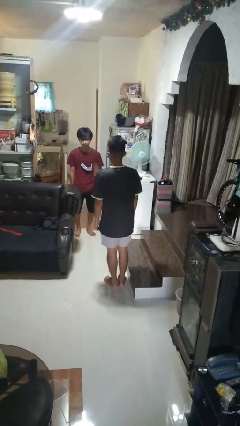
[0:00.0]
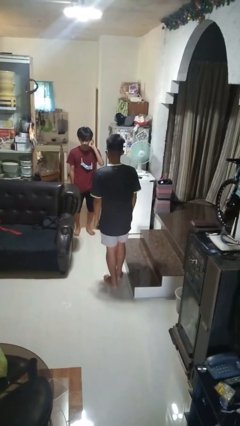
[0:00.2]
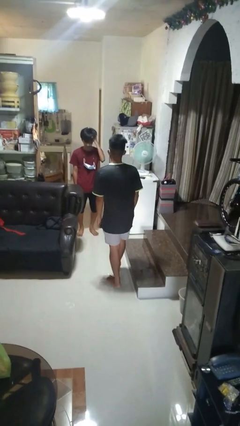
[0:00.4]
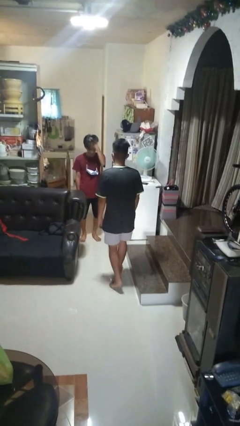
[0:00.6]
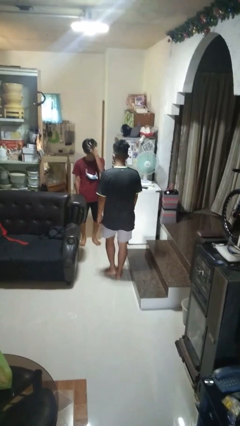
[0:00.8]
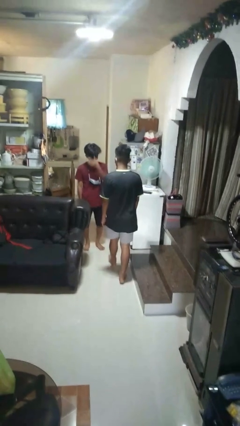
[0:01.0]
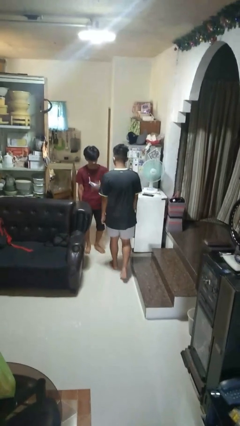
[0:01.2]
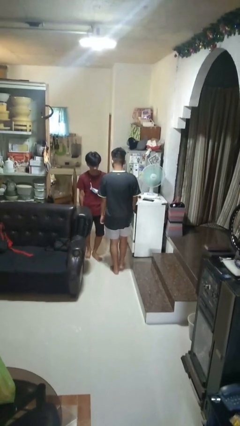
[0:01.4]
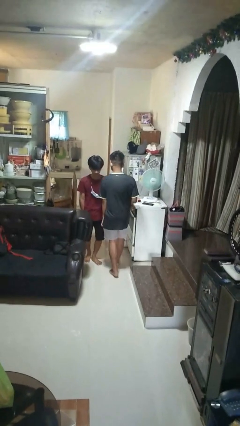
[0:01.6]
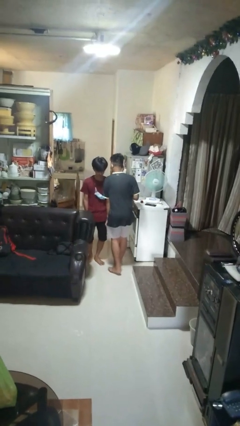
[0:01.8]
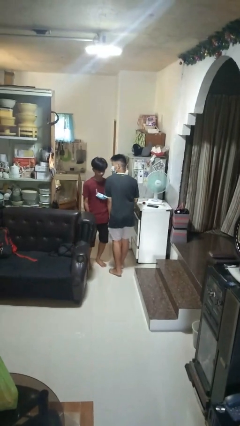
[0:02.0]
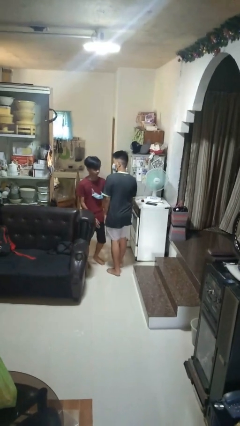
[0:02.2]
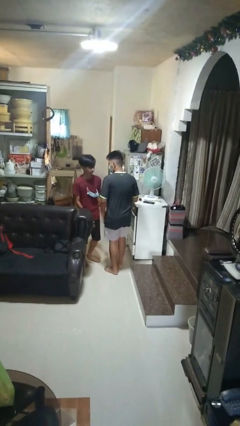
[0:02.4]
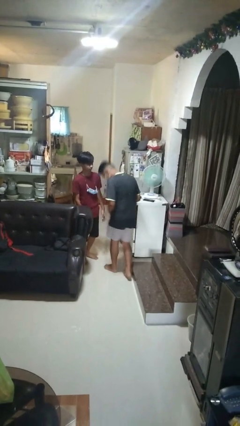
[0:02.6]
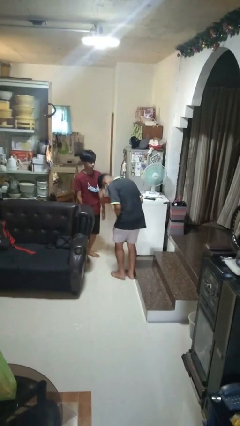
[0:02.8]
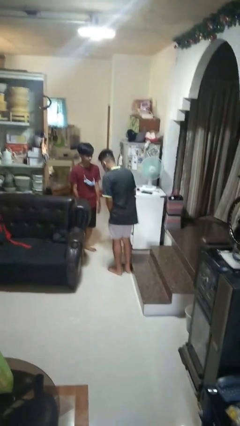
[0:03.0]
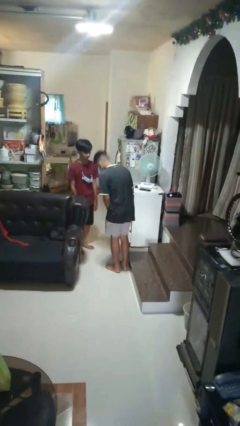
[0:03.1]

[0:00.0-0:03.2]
person bumps into person

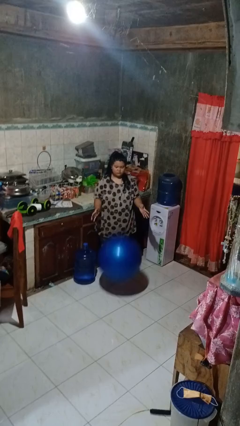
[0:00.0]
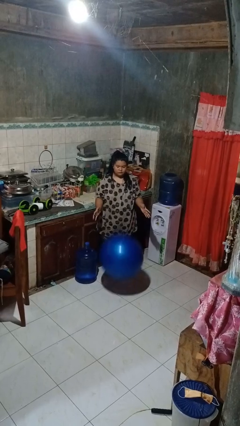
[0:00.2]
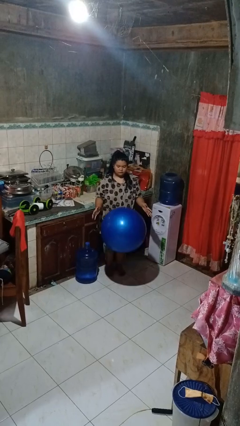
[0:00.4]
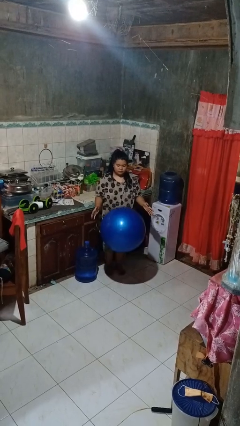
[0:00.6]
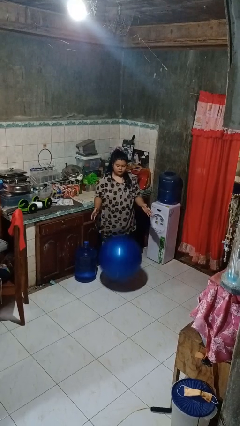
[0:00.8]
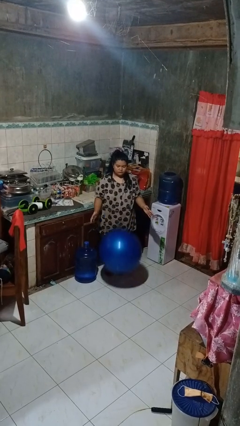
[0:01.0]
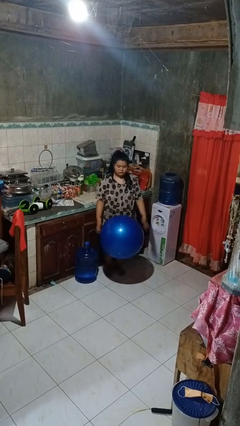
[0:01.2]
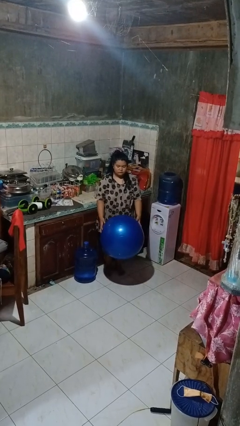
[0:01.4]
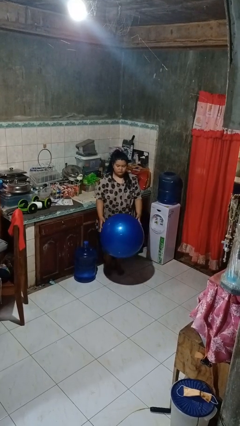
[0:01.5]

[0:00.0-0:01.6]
person bounces ball on floor

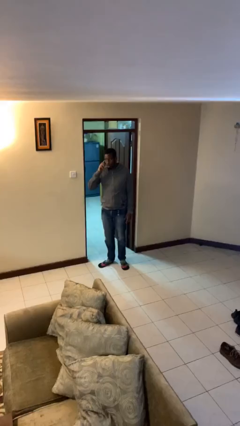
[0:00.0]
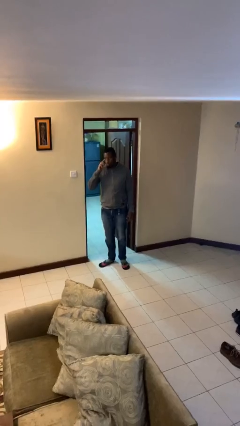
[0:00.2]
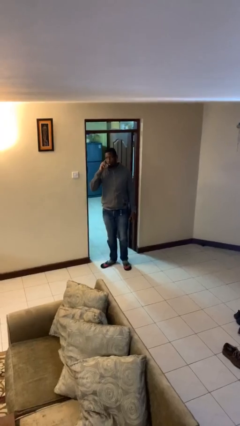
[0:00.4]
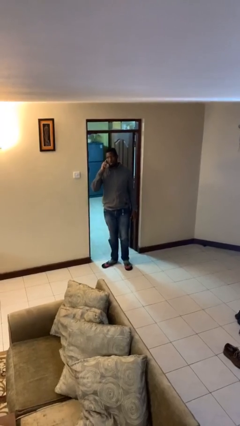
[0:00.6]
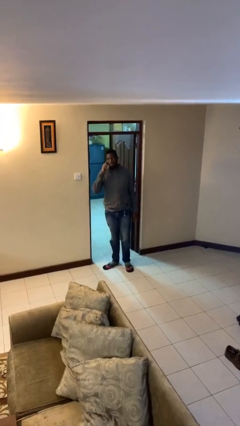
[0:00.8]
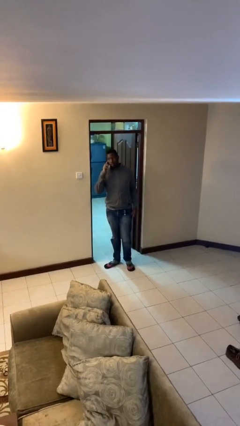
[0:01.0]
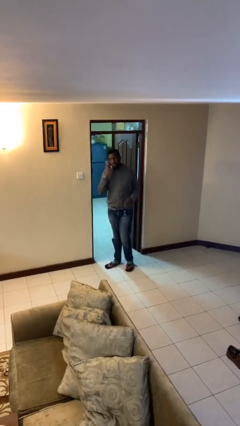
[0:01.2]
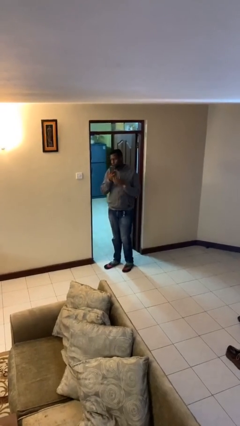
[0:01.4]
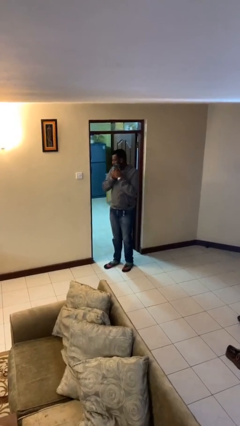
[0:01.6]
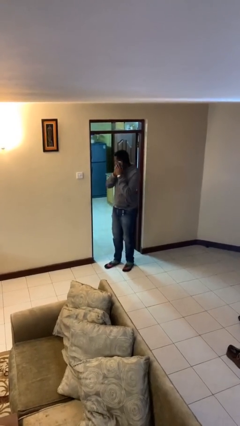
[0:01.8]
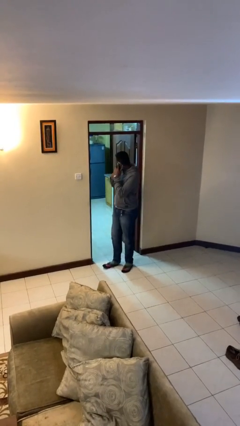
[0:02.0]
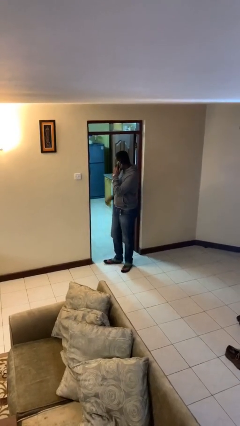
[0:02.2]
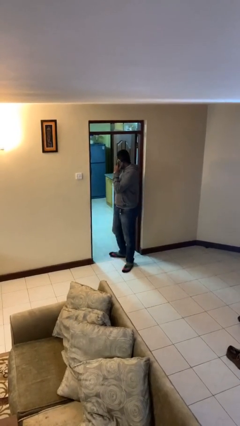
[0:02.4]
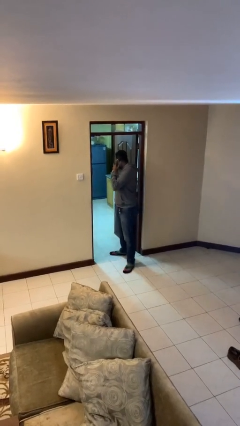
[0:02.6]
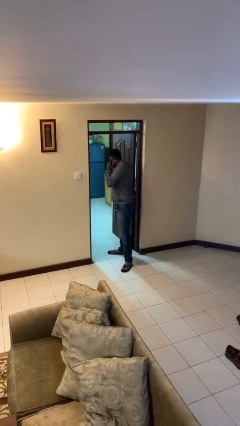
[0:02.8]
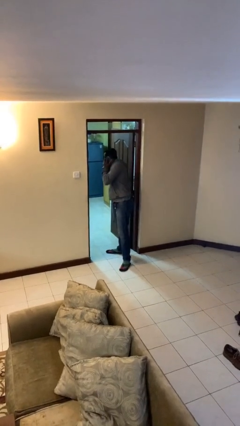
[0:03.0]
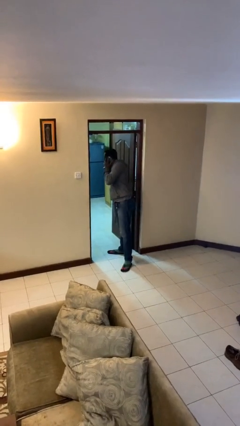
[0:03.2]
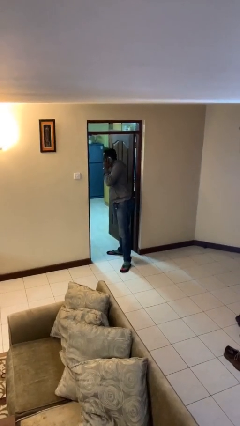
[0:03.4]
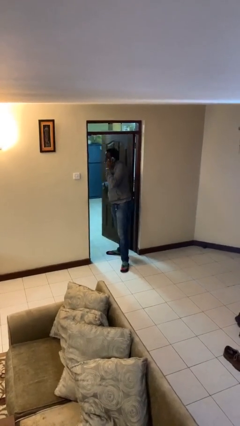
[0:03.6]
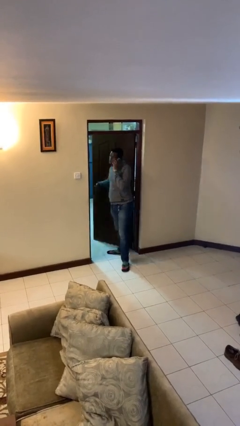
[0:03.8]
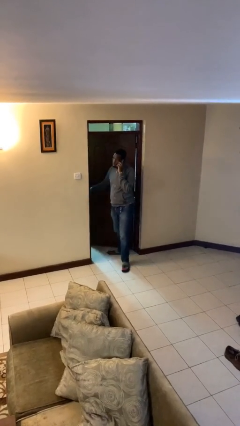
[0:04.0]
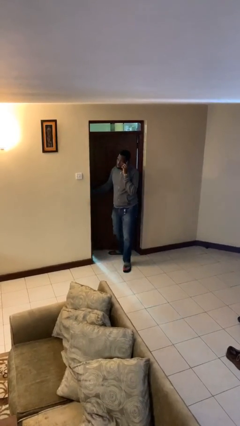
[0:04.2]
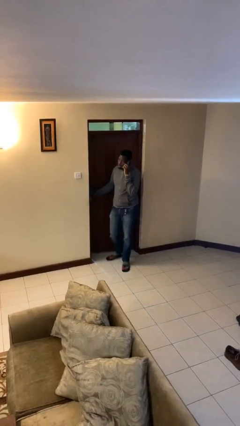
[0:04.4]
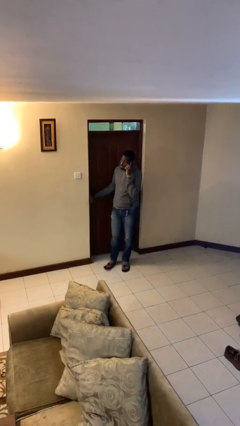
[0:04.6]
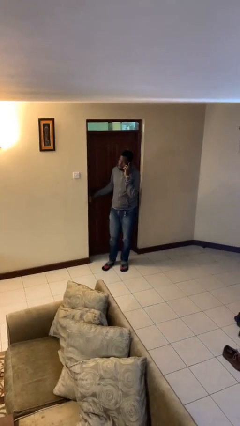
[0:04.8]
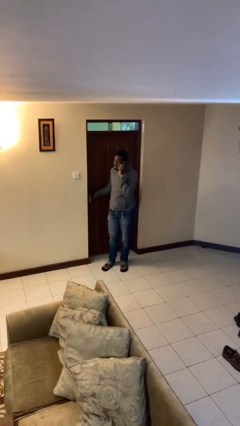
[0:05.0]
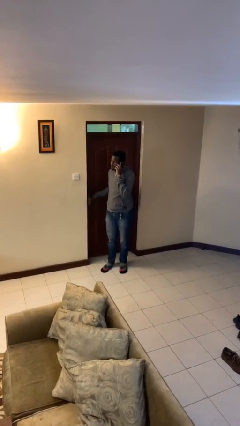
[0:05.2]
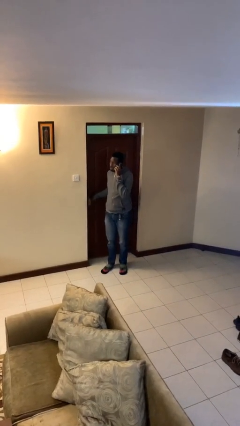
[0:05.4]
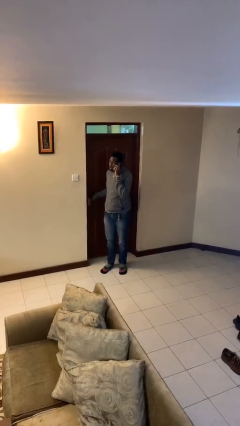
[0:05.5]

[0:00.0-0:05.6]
person closes facility door

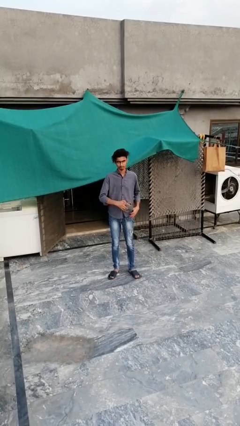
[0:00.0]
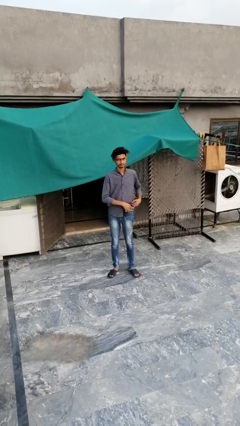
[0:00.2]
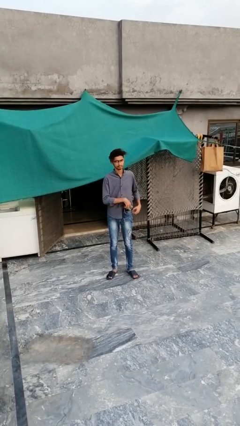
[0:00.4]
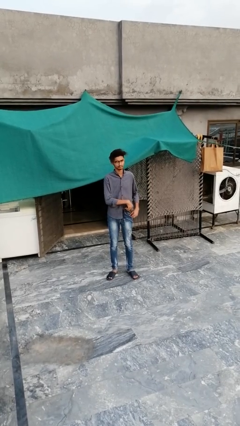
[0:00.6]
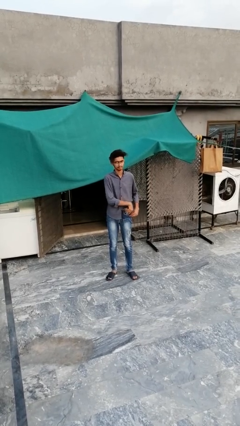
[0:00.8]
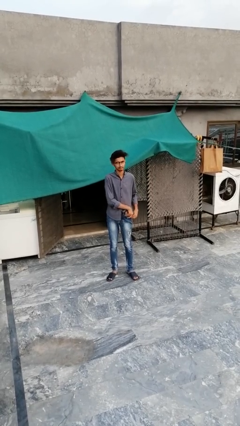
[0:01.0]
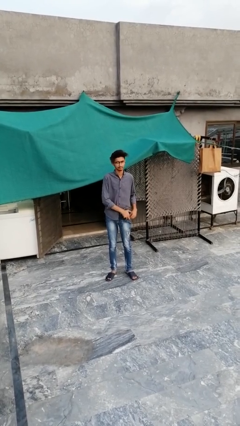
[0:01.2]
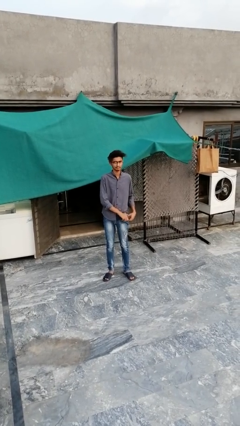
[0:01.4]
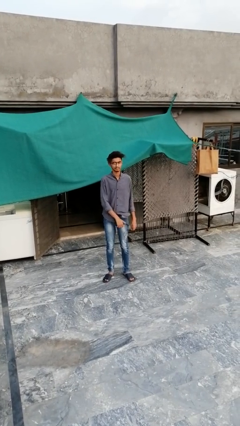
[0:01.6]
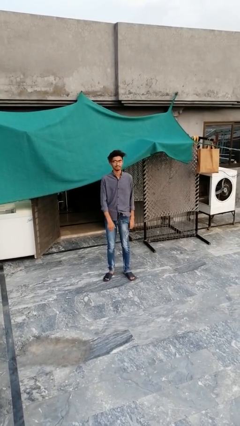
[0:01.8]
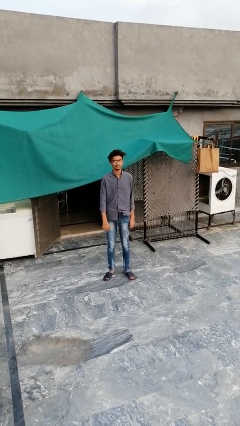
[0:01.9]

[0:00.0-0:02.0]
person puts phone into pocket

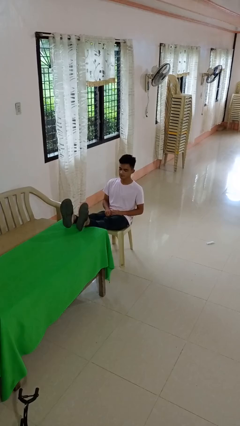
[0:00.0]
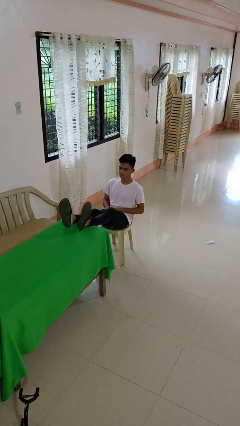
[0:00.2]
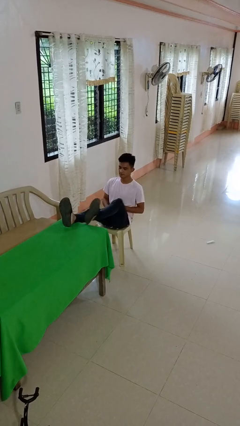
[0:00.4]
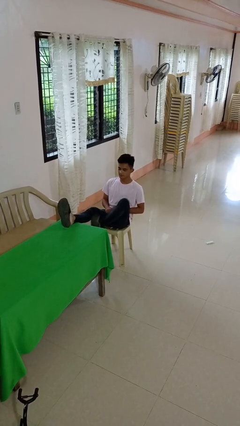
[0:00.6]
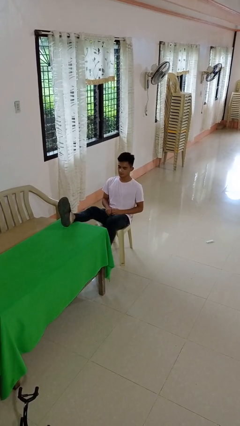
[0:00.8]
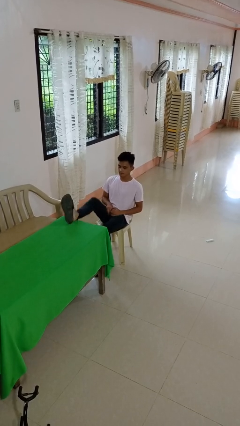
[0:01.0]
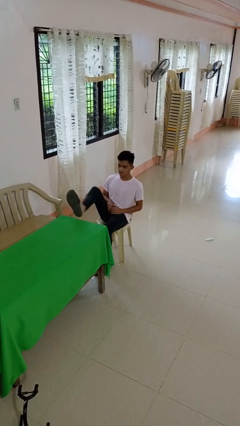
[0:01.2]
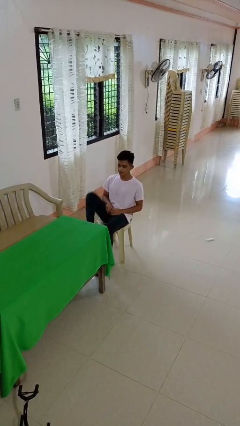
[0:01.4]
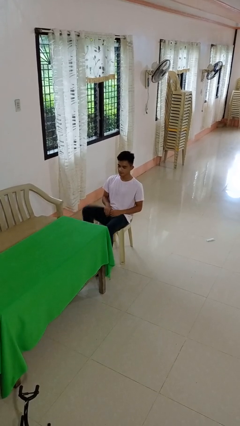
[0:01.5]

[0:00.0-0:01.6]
person puts feet up

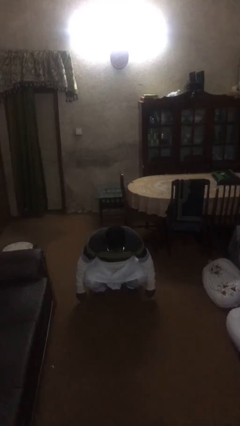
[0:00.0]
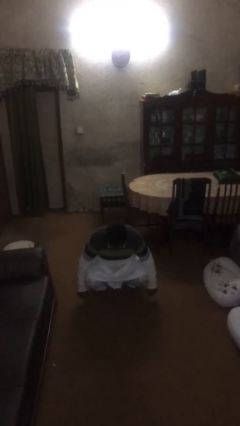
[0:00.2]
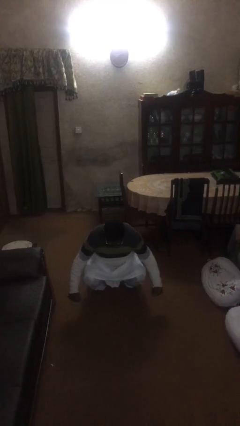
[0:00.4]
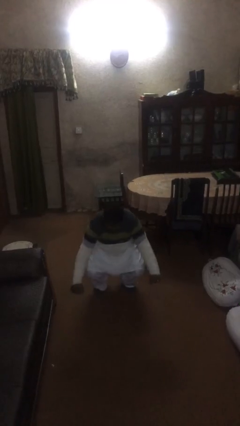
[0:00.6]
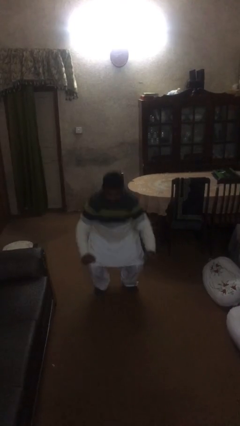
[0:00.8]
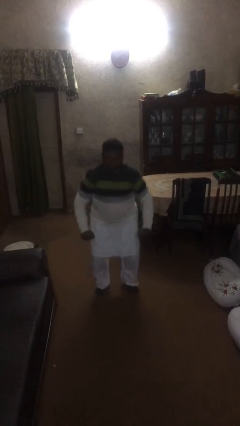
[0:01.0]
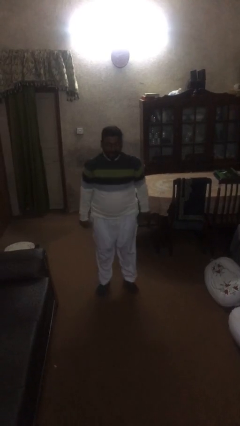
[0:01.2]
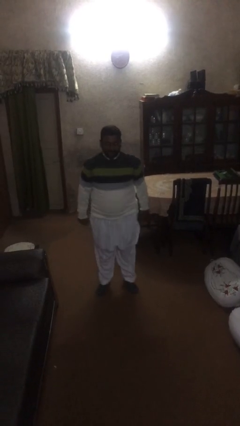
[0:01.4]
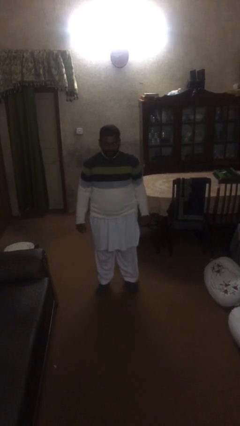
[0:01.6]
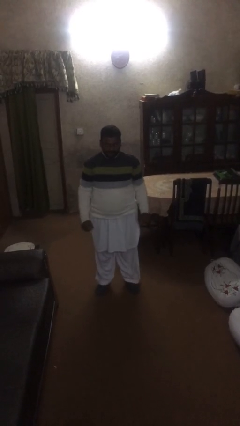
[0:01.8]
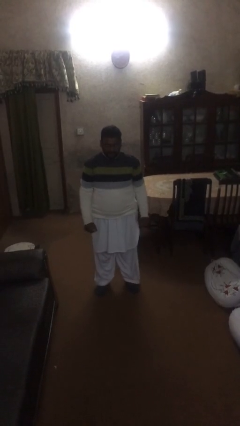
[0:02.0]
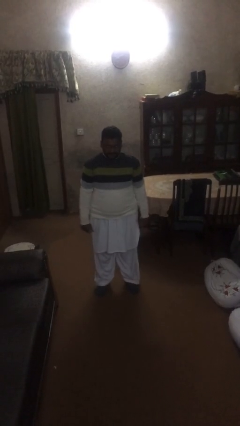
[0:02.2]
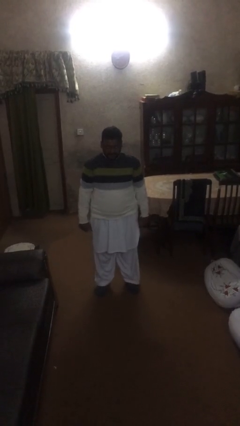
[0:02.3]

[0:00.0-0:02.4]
person stands up

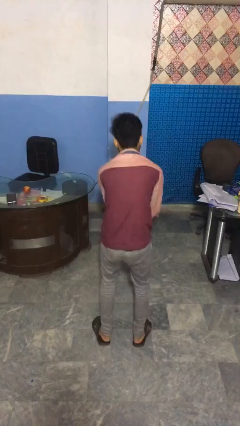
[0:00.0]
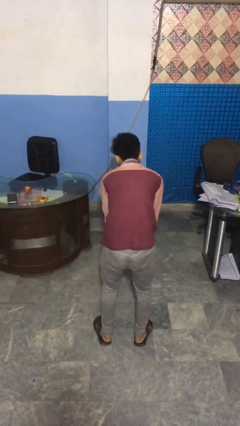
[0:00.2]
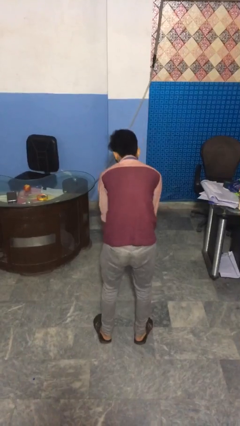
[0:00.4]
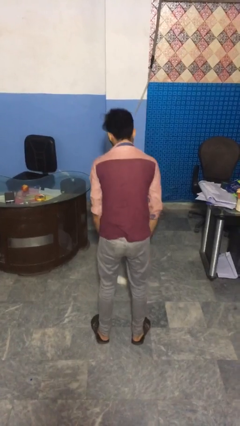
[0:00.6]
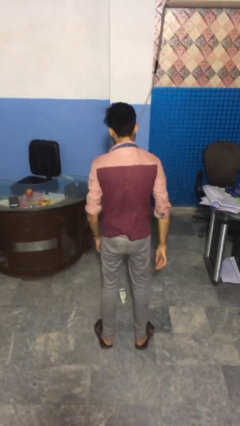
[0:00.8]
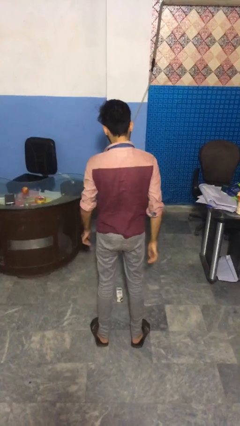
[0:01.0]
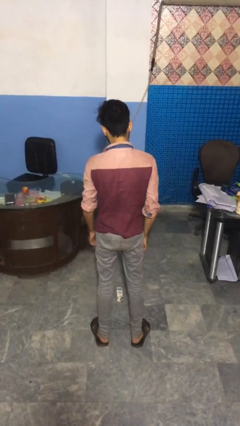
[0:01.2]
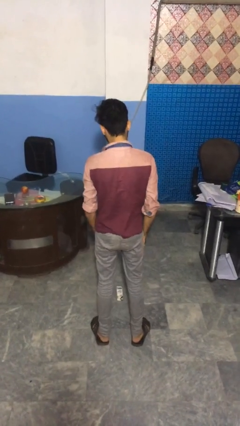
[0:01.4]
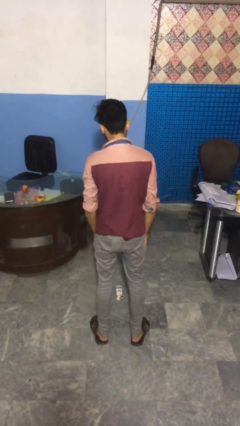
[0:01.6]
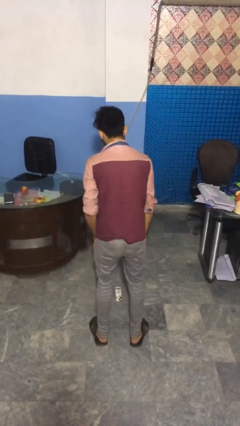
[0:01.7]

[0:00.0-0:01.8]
person catches dropped object
